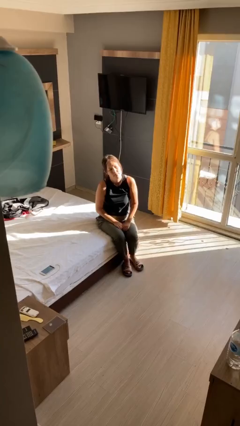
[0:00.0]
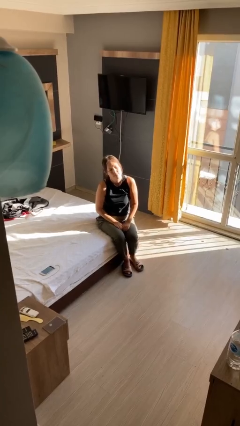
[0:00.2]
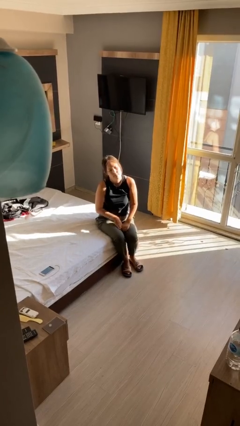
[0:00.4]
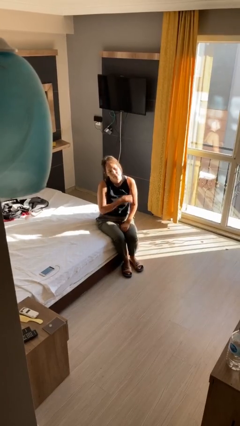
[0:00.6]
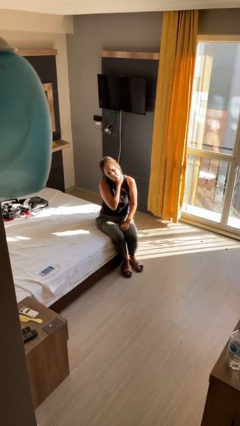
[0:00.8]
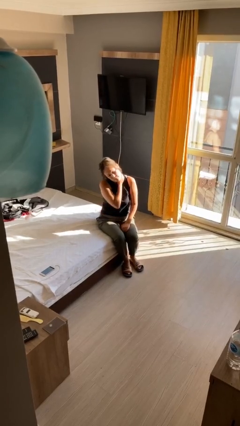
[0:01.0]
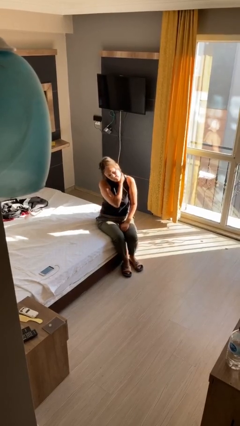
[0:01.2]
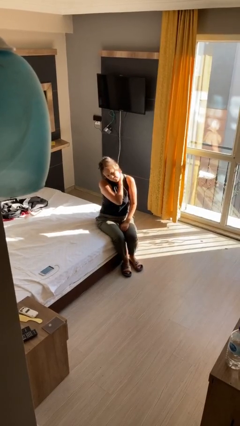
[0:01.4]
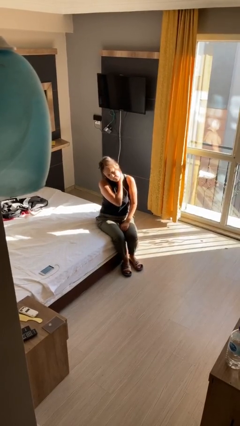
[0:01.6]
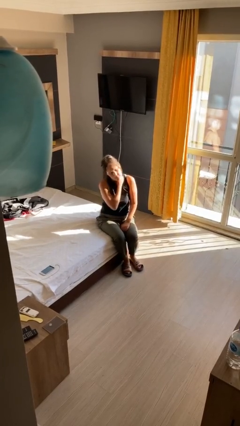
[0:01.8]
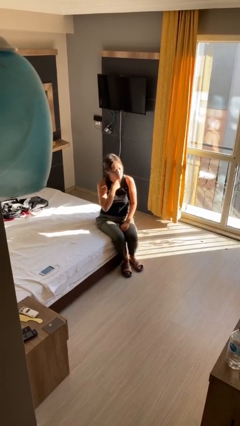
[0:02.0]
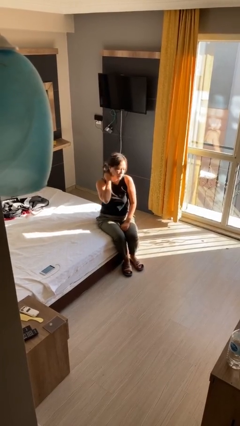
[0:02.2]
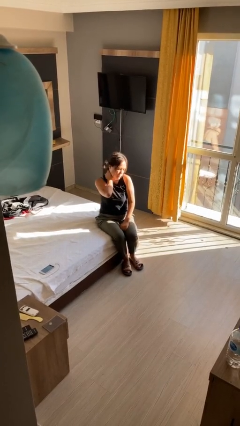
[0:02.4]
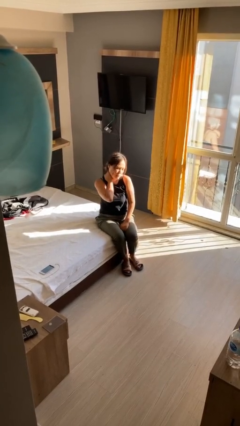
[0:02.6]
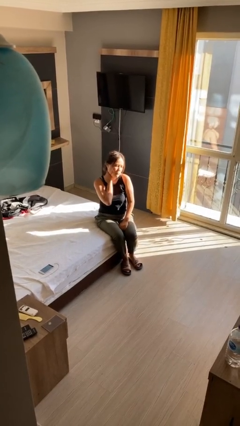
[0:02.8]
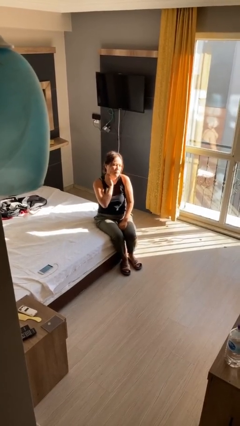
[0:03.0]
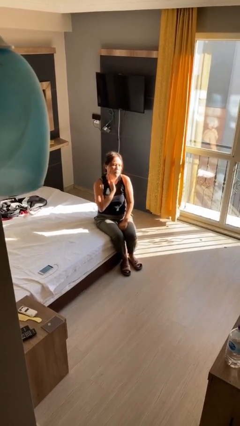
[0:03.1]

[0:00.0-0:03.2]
person rubs neck

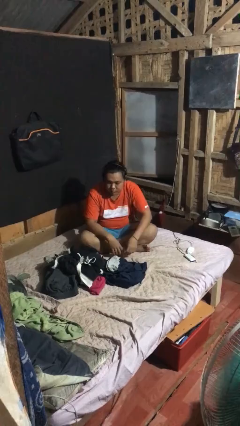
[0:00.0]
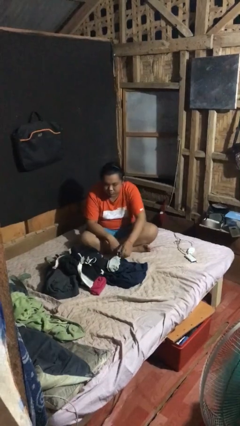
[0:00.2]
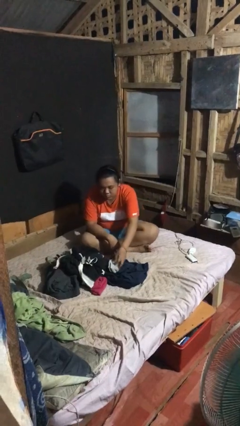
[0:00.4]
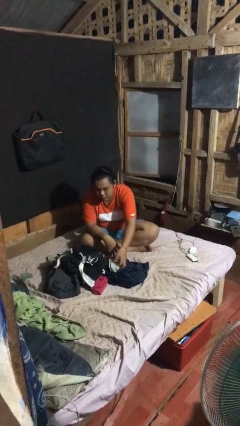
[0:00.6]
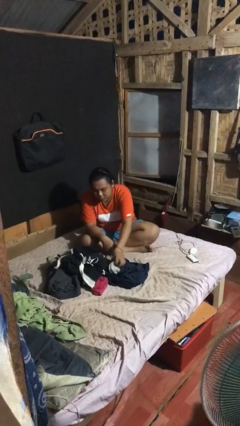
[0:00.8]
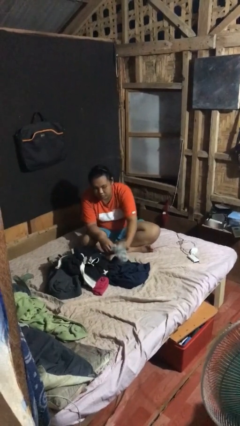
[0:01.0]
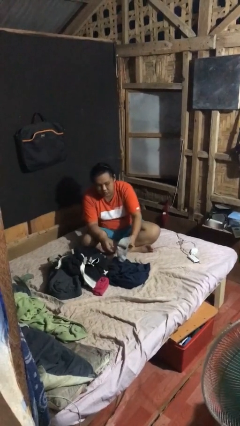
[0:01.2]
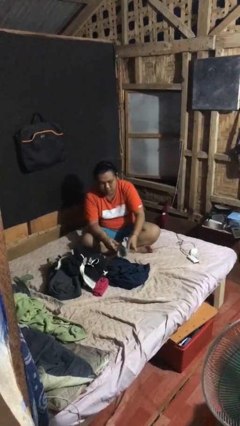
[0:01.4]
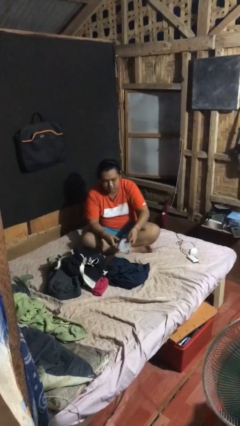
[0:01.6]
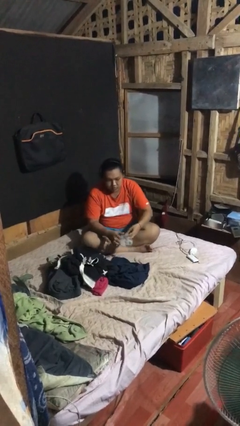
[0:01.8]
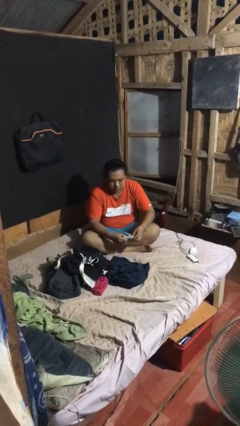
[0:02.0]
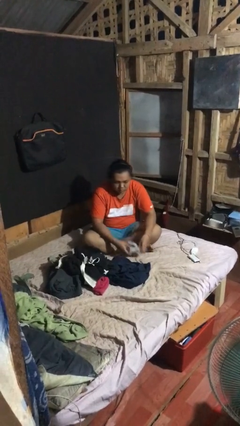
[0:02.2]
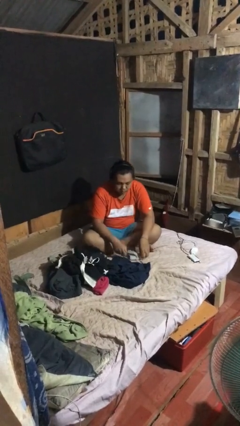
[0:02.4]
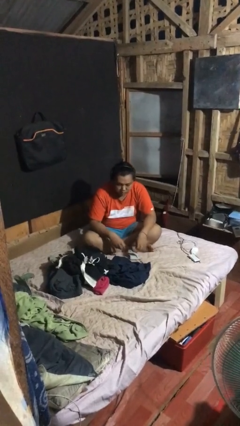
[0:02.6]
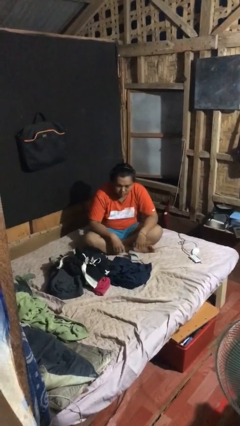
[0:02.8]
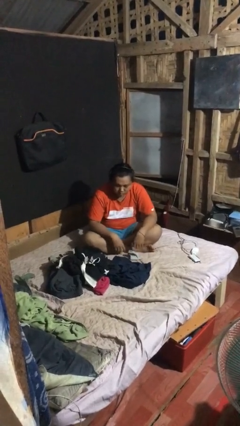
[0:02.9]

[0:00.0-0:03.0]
person folds socks

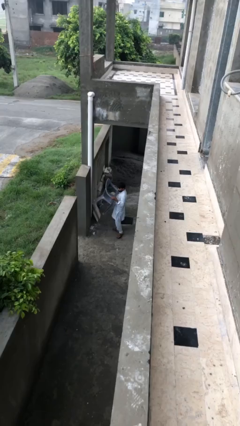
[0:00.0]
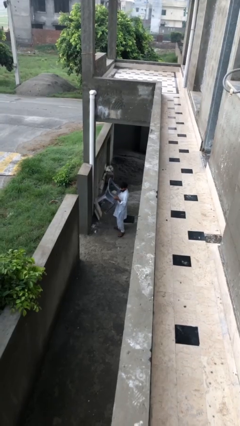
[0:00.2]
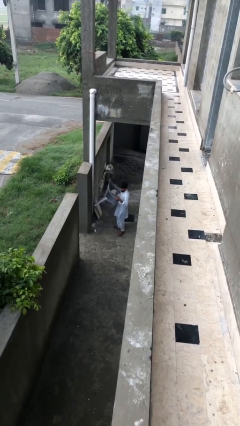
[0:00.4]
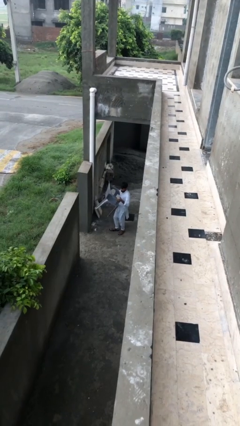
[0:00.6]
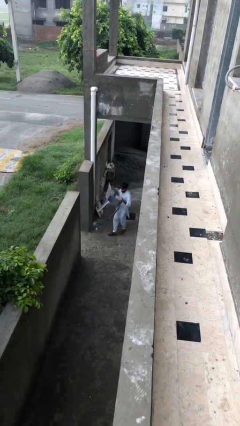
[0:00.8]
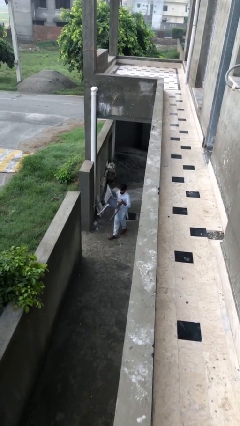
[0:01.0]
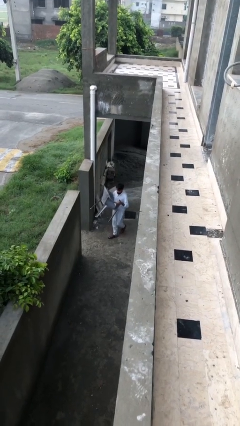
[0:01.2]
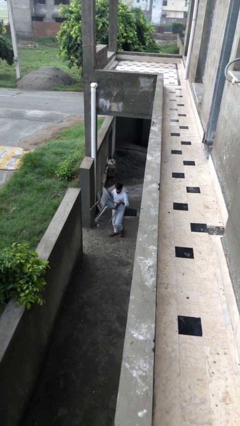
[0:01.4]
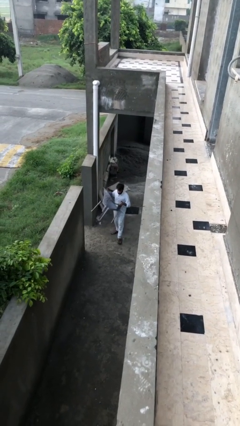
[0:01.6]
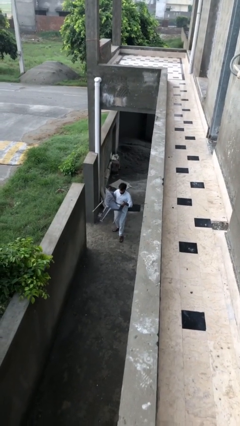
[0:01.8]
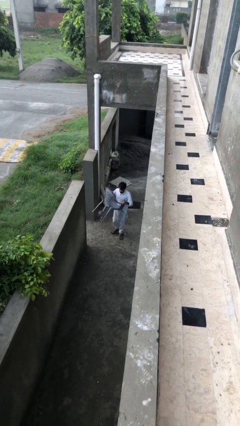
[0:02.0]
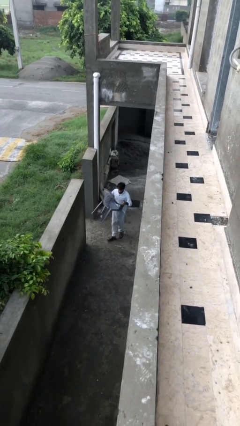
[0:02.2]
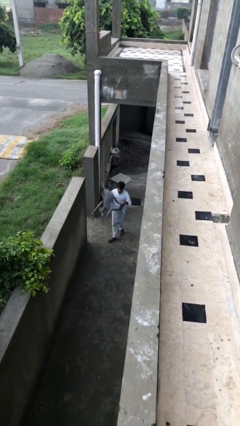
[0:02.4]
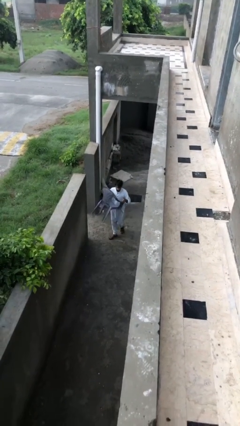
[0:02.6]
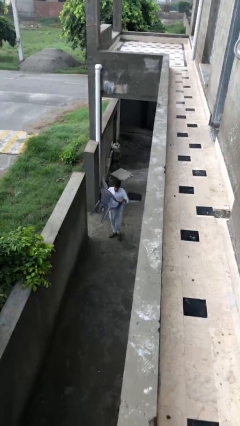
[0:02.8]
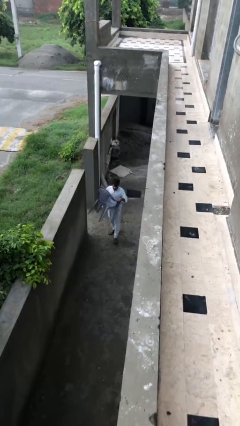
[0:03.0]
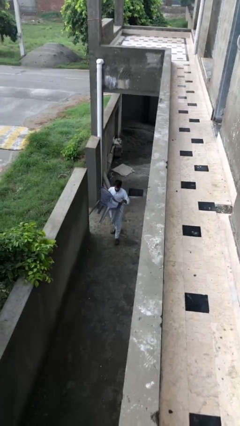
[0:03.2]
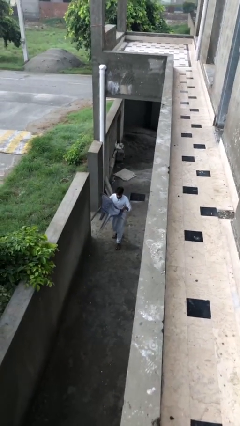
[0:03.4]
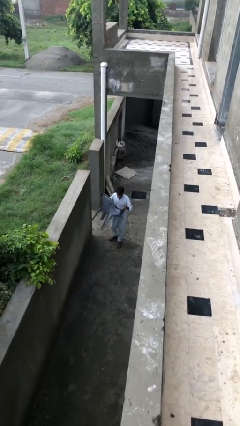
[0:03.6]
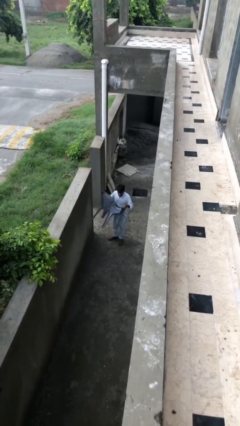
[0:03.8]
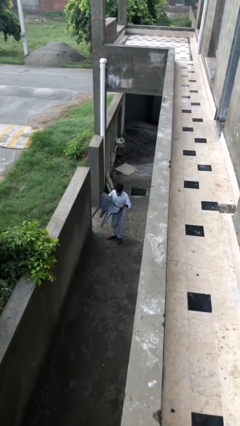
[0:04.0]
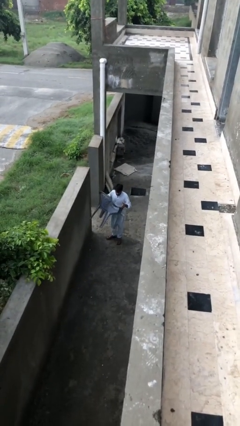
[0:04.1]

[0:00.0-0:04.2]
person carries heavy object

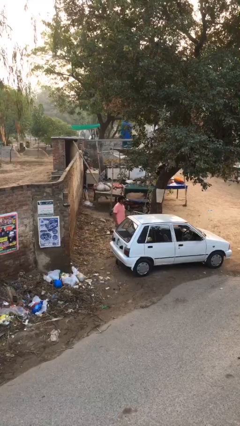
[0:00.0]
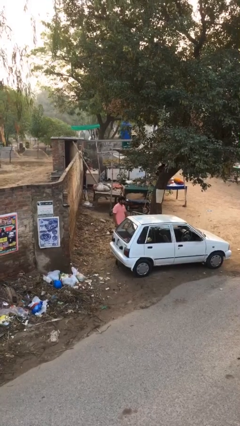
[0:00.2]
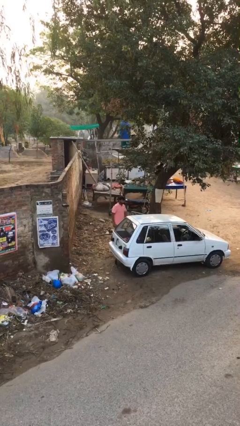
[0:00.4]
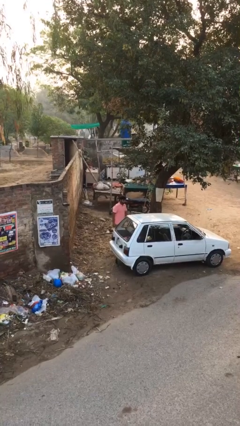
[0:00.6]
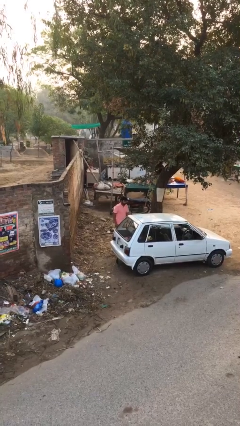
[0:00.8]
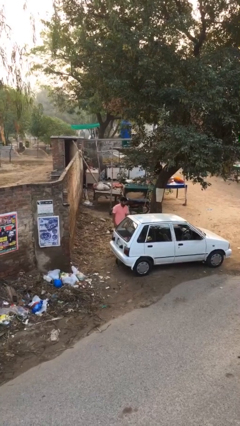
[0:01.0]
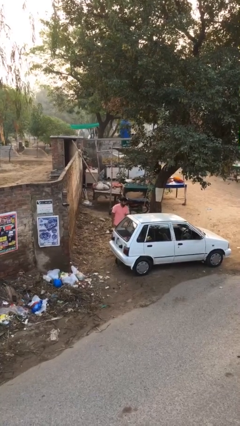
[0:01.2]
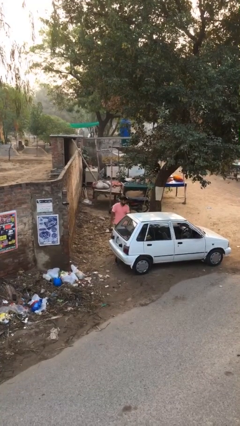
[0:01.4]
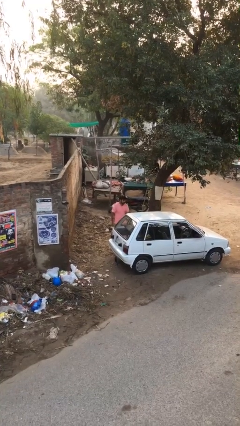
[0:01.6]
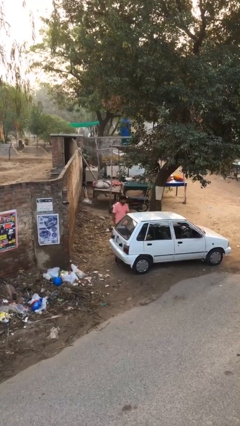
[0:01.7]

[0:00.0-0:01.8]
person closes car door

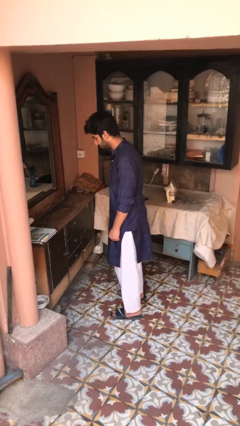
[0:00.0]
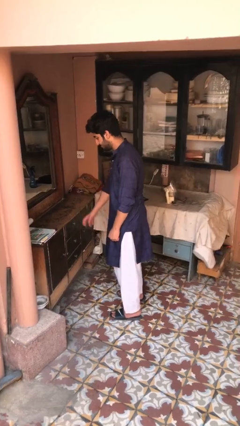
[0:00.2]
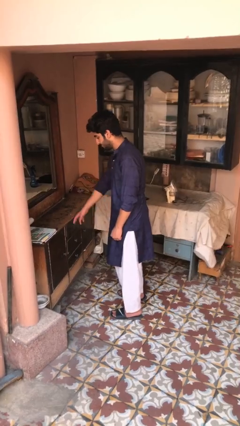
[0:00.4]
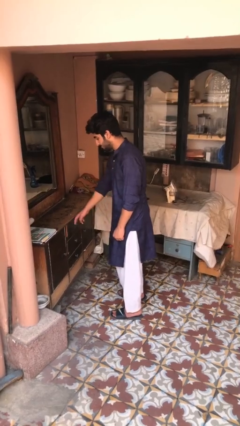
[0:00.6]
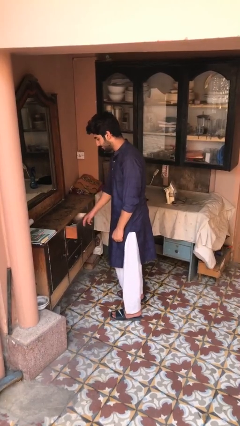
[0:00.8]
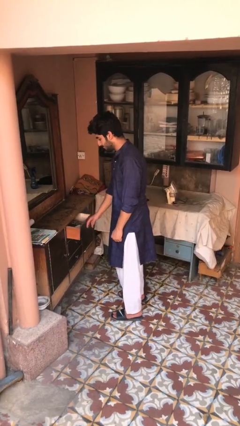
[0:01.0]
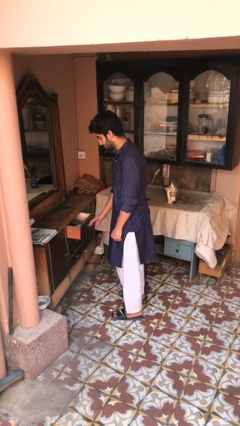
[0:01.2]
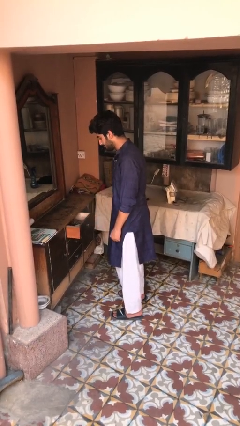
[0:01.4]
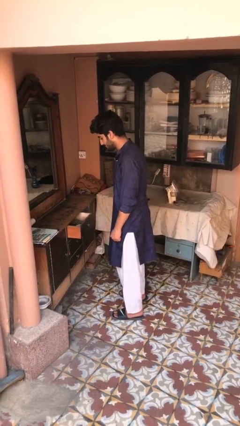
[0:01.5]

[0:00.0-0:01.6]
person opens dresser drawer

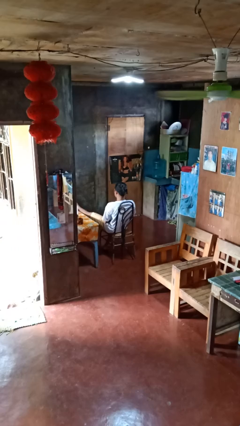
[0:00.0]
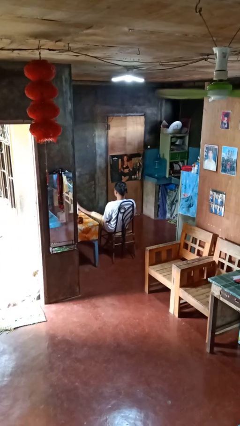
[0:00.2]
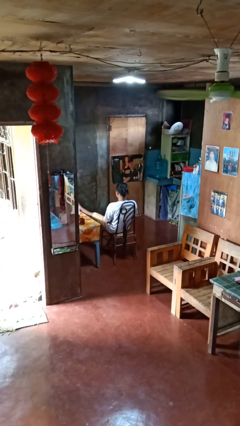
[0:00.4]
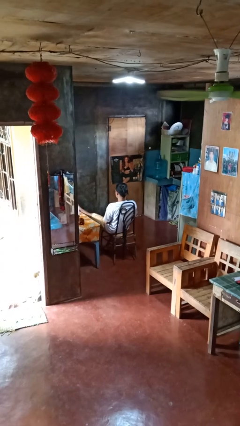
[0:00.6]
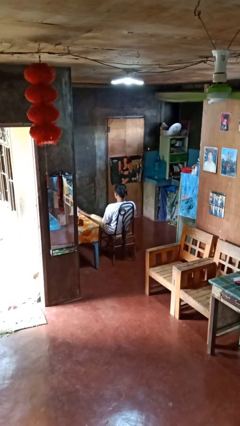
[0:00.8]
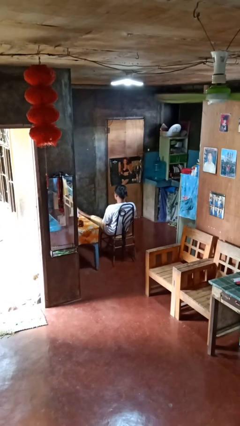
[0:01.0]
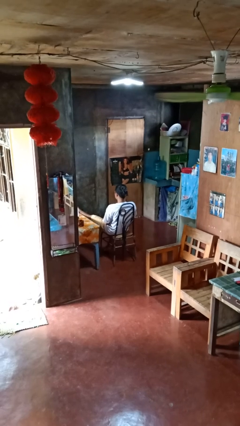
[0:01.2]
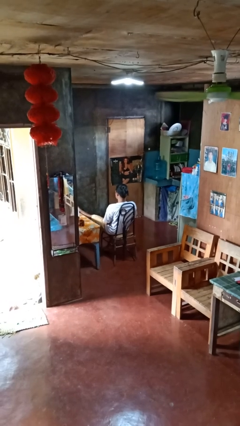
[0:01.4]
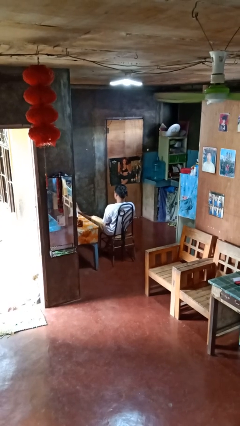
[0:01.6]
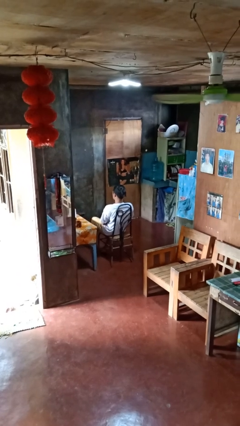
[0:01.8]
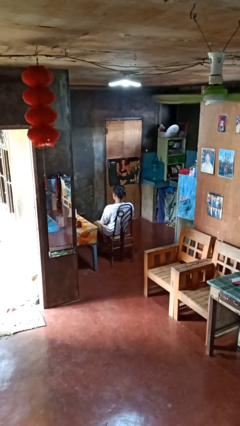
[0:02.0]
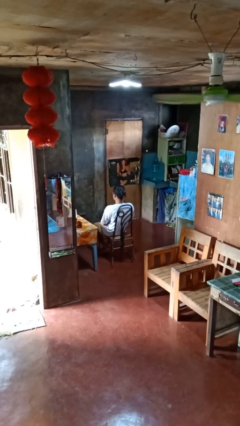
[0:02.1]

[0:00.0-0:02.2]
person puts feet up

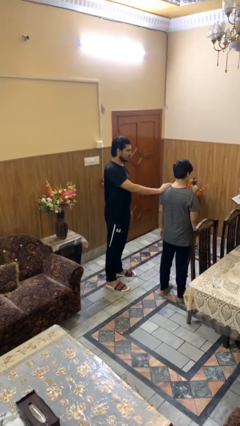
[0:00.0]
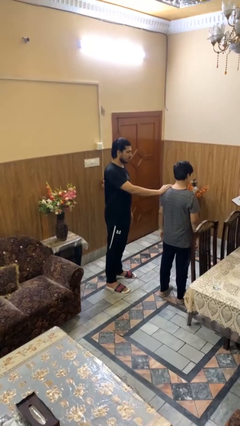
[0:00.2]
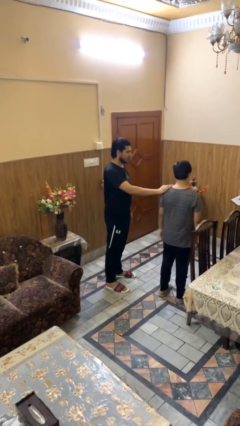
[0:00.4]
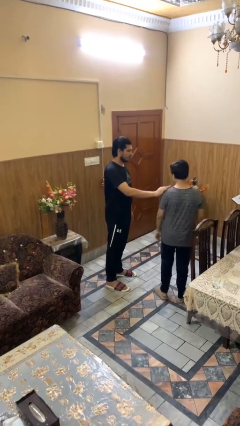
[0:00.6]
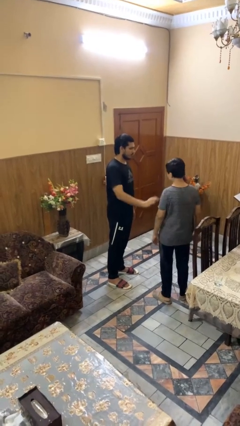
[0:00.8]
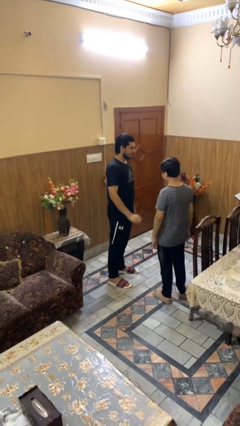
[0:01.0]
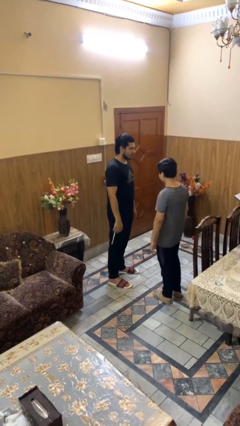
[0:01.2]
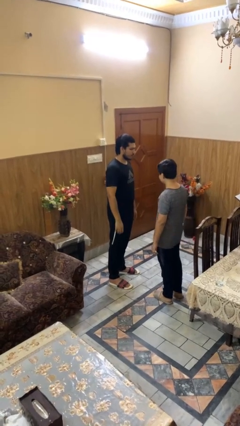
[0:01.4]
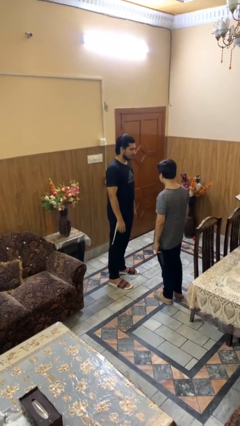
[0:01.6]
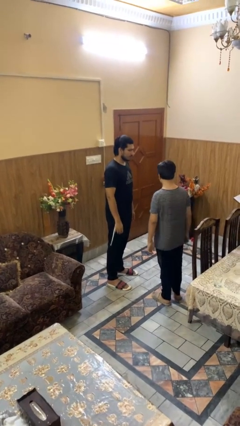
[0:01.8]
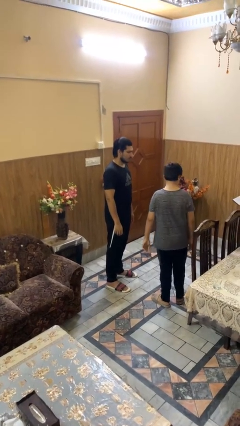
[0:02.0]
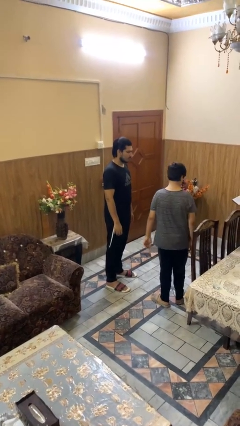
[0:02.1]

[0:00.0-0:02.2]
person spins person around
